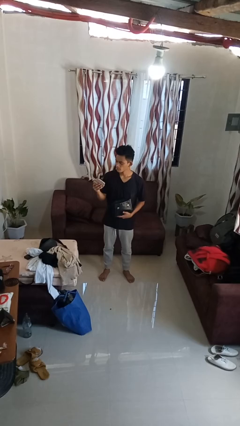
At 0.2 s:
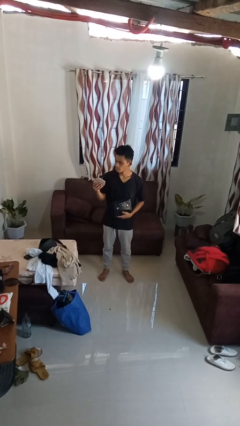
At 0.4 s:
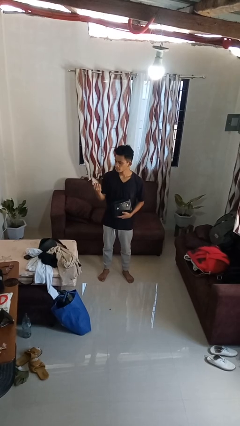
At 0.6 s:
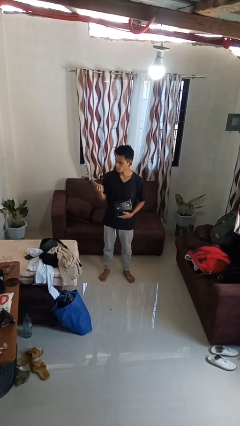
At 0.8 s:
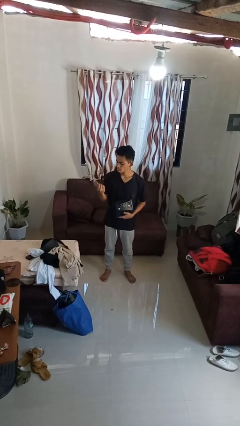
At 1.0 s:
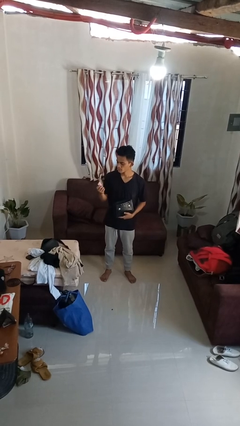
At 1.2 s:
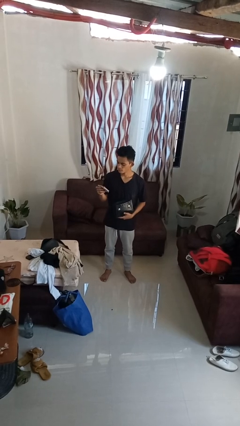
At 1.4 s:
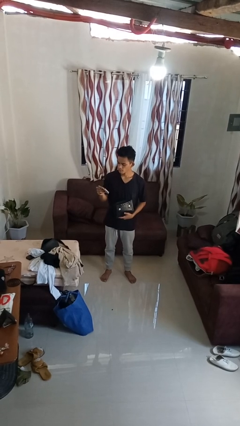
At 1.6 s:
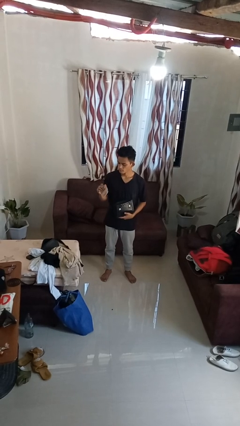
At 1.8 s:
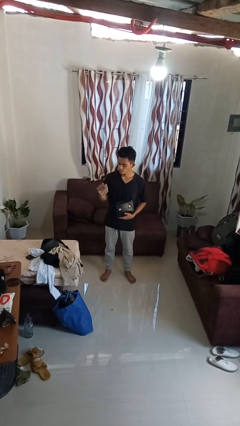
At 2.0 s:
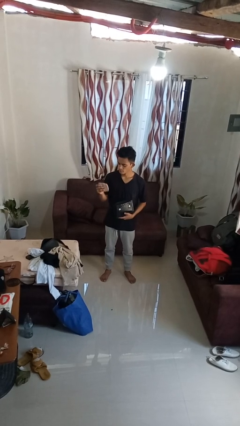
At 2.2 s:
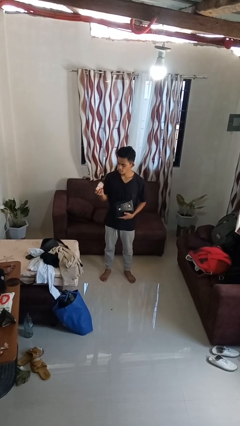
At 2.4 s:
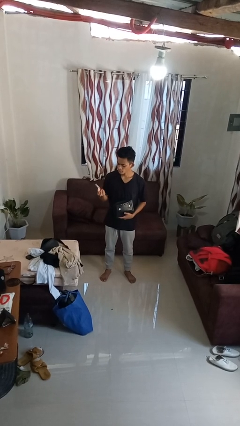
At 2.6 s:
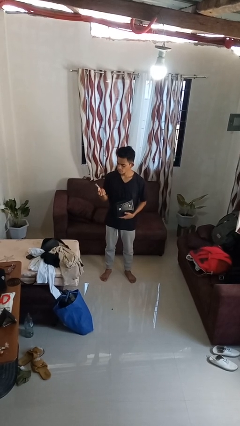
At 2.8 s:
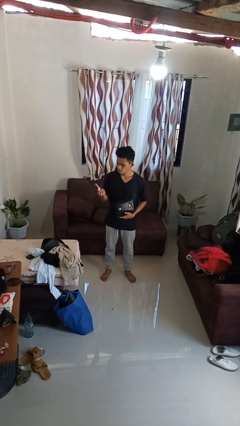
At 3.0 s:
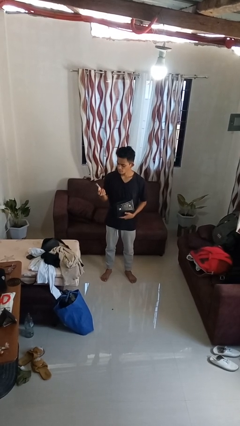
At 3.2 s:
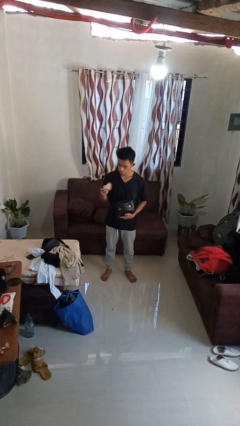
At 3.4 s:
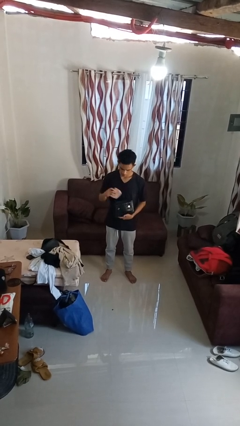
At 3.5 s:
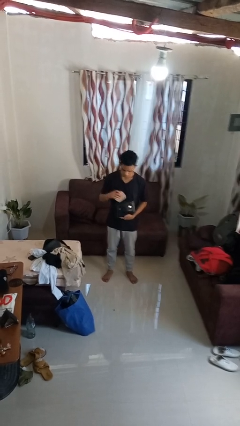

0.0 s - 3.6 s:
person takes object from purse

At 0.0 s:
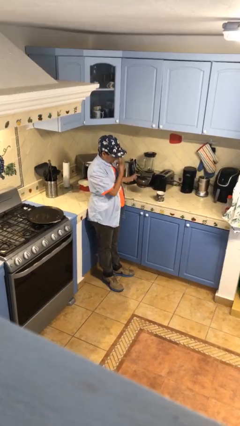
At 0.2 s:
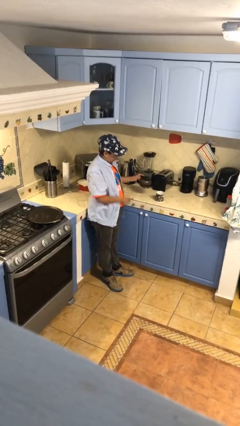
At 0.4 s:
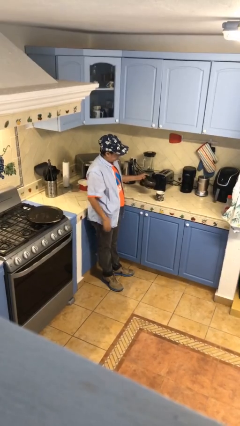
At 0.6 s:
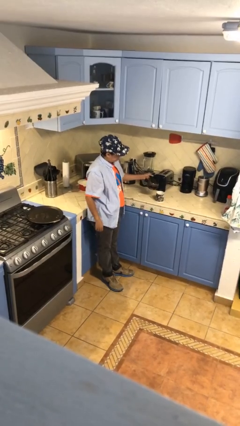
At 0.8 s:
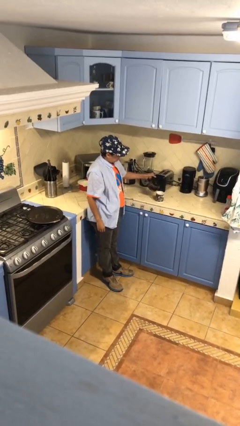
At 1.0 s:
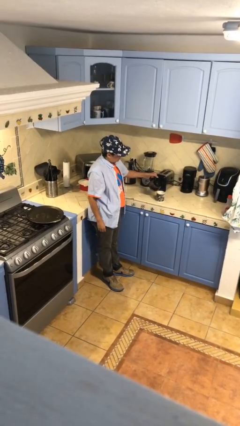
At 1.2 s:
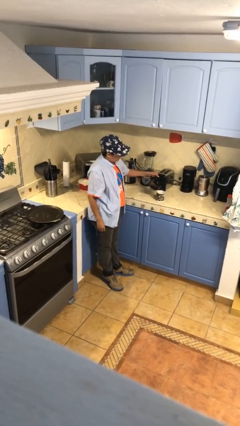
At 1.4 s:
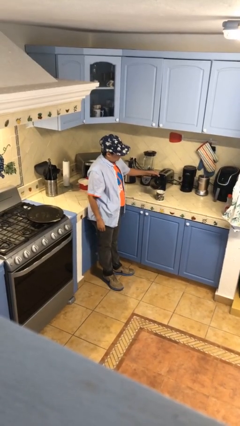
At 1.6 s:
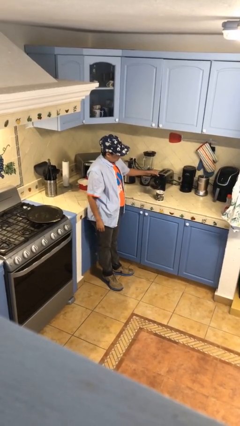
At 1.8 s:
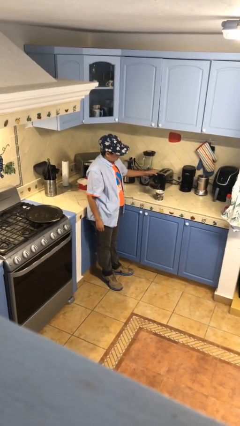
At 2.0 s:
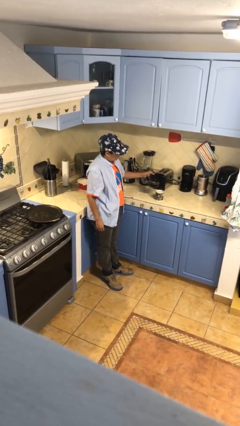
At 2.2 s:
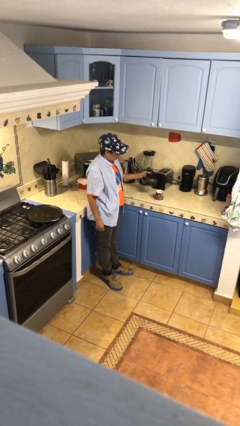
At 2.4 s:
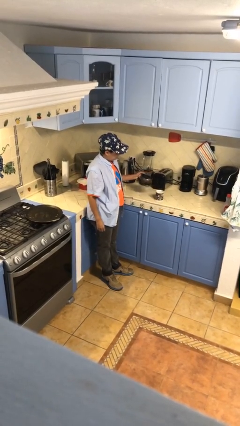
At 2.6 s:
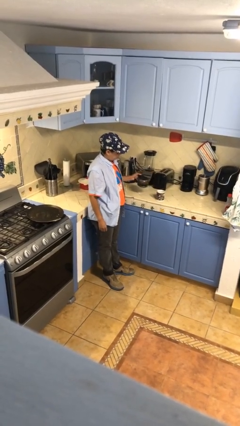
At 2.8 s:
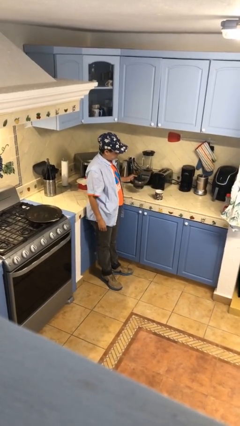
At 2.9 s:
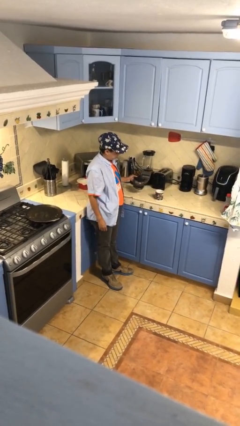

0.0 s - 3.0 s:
person pours coffee into mug

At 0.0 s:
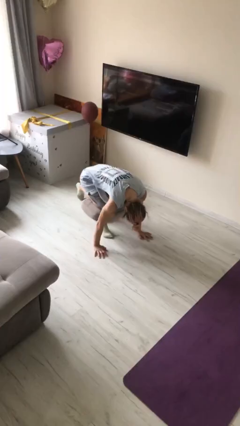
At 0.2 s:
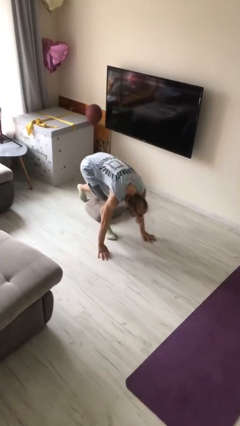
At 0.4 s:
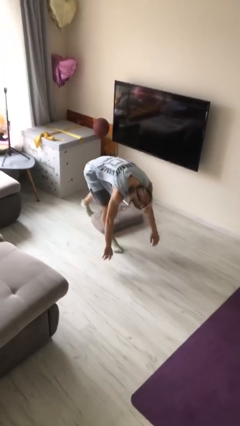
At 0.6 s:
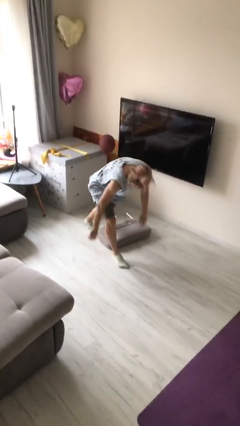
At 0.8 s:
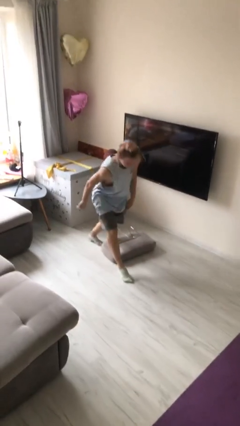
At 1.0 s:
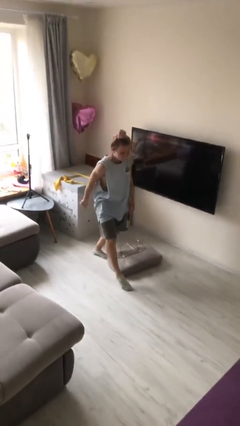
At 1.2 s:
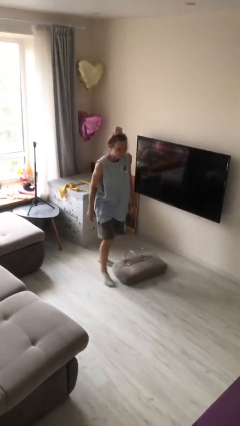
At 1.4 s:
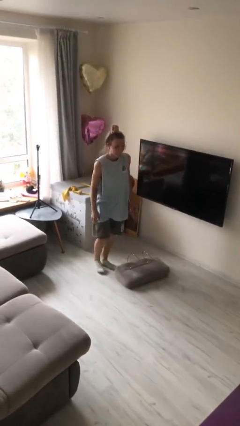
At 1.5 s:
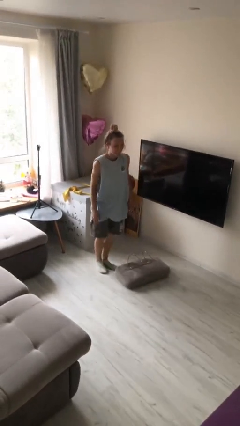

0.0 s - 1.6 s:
person stands up from floor

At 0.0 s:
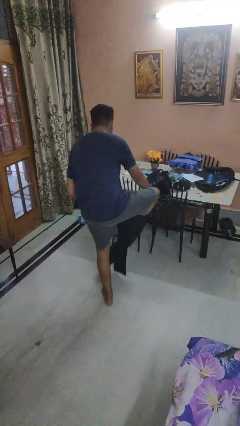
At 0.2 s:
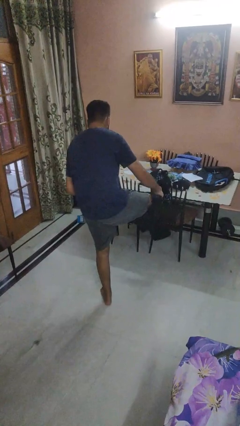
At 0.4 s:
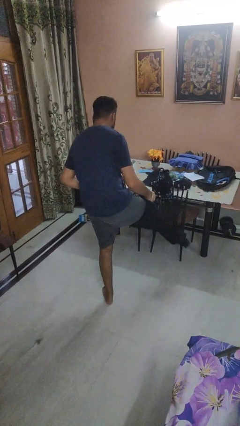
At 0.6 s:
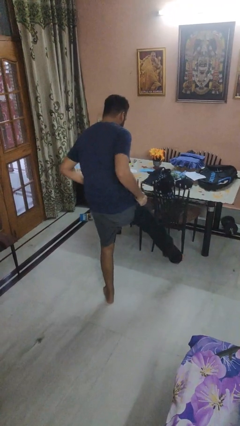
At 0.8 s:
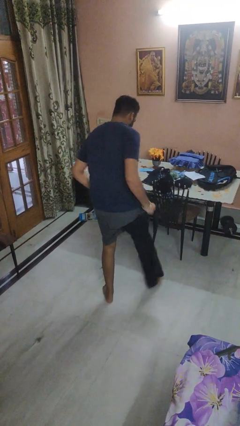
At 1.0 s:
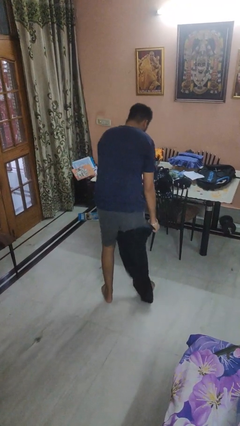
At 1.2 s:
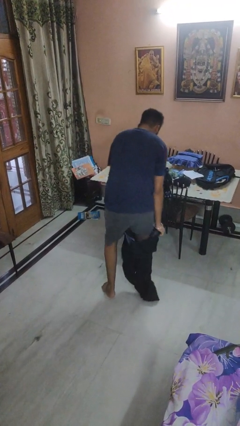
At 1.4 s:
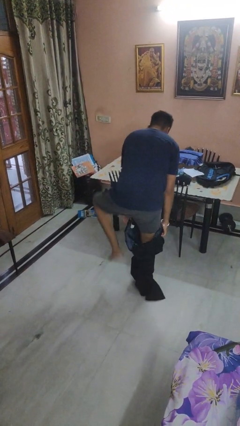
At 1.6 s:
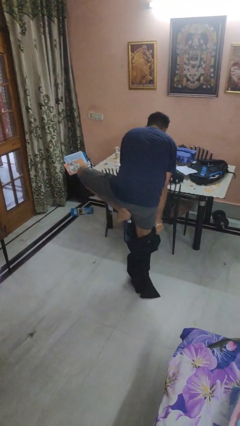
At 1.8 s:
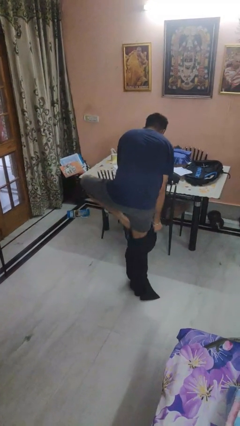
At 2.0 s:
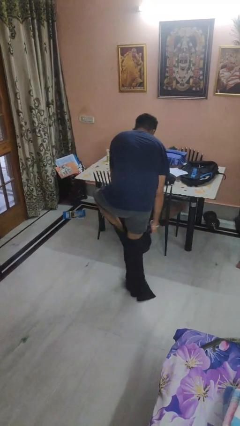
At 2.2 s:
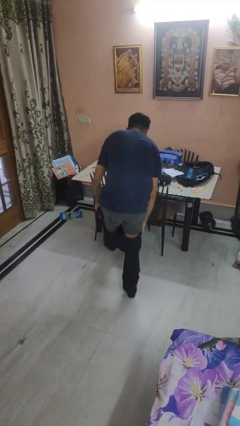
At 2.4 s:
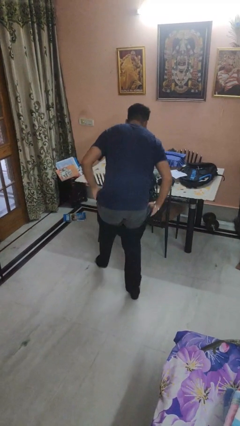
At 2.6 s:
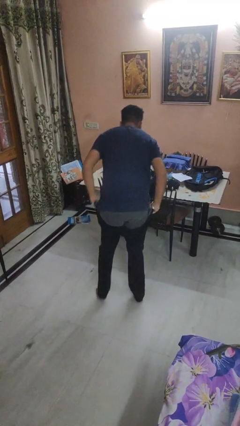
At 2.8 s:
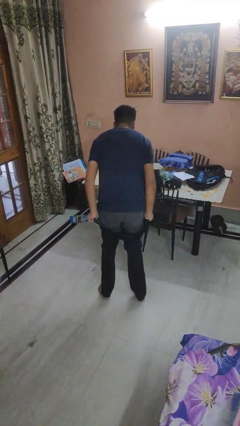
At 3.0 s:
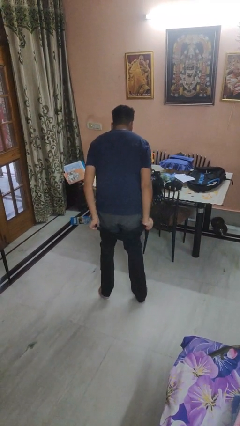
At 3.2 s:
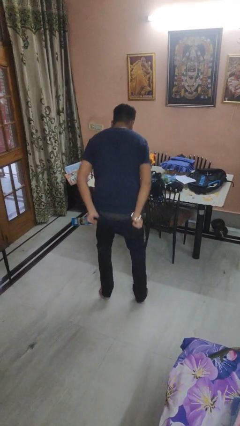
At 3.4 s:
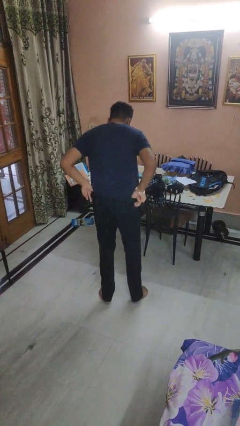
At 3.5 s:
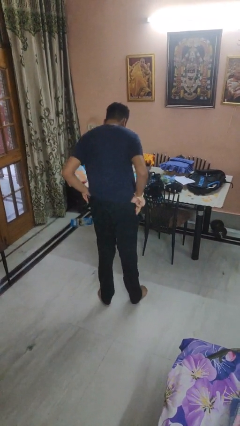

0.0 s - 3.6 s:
person puts on pants

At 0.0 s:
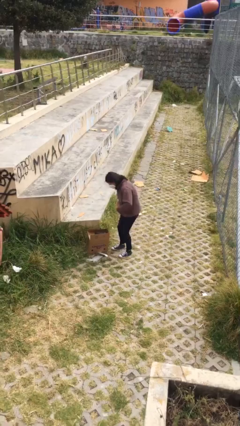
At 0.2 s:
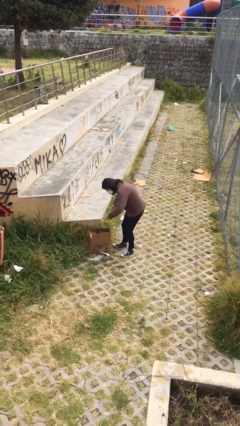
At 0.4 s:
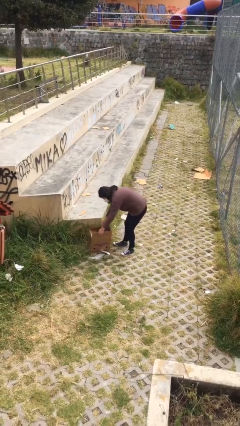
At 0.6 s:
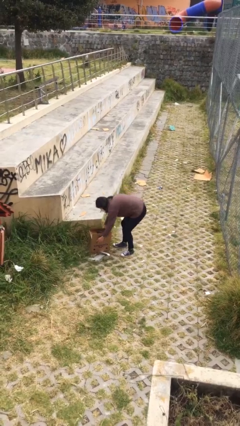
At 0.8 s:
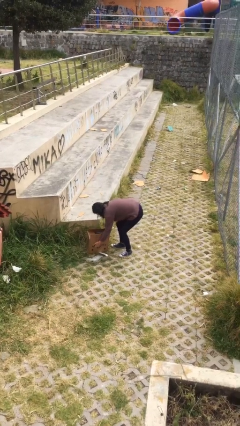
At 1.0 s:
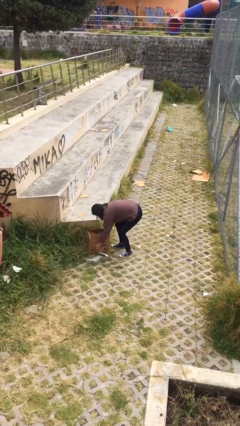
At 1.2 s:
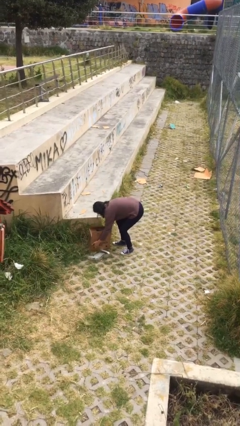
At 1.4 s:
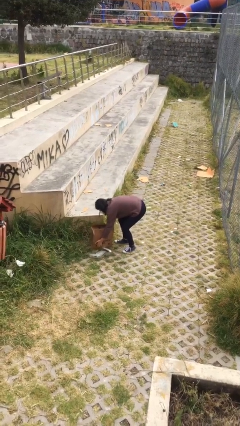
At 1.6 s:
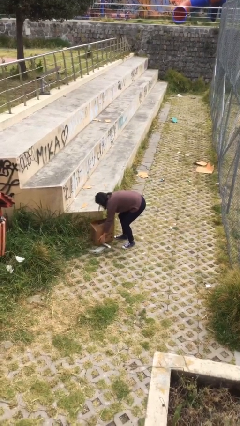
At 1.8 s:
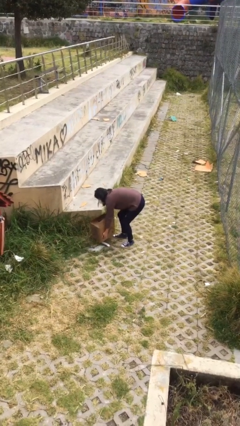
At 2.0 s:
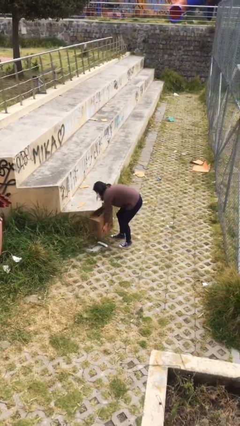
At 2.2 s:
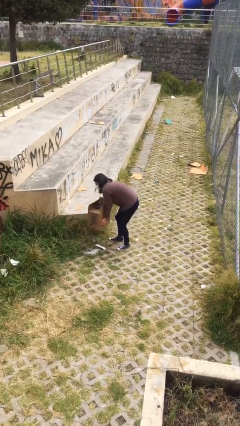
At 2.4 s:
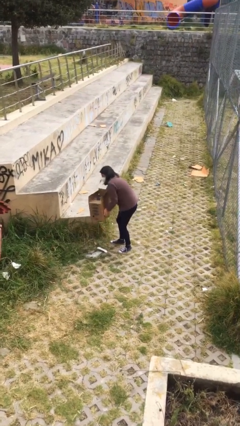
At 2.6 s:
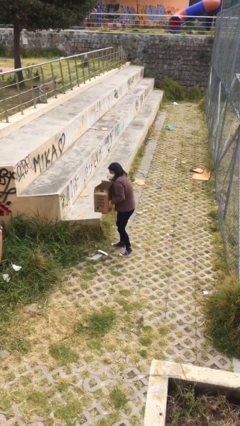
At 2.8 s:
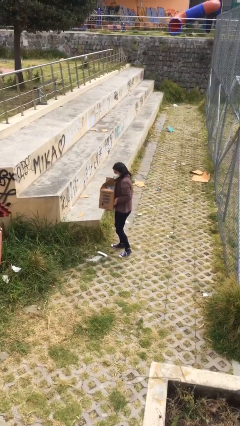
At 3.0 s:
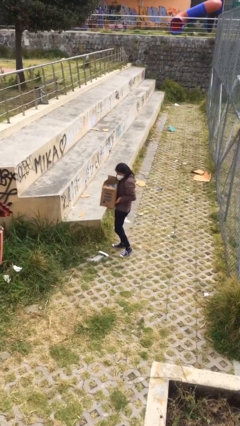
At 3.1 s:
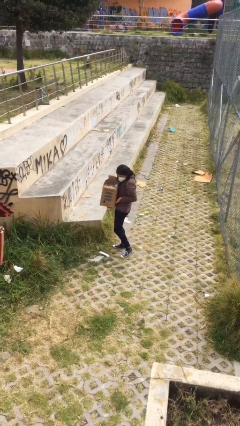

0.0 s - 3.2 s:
person picks up object from floor

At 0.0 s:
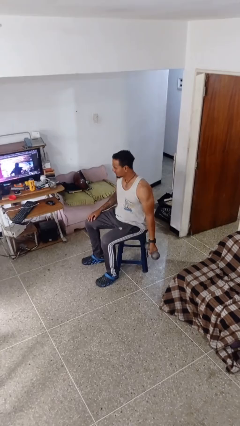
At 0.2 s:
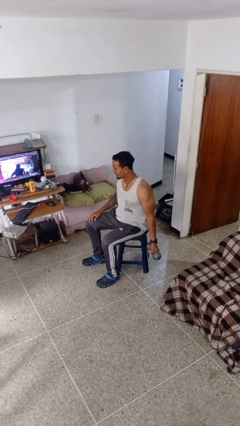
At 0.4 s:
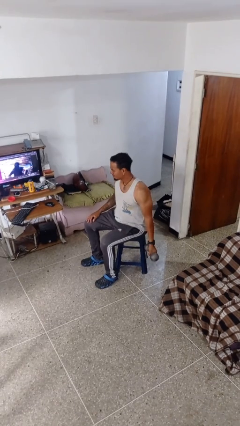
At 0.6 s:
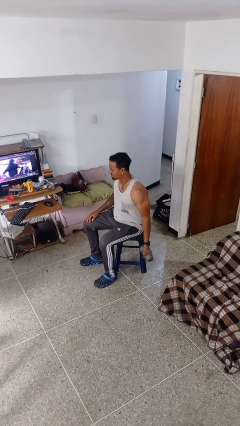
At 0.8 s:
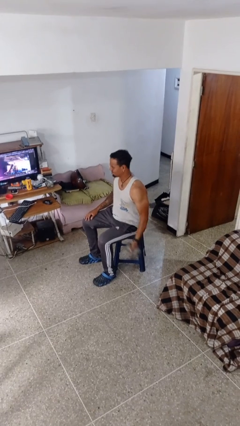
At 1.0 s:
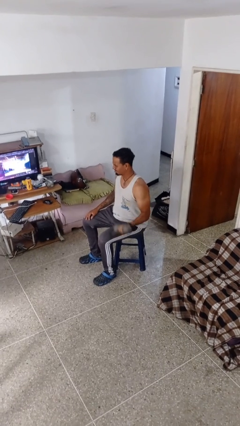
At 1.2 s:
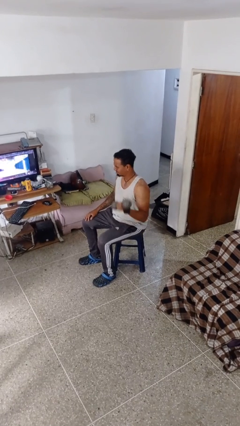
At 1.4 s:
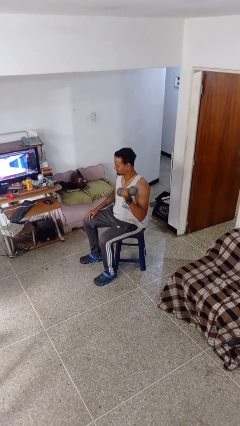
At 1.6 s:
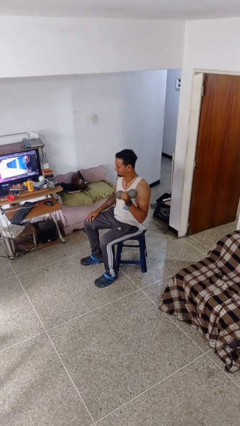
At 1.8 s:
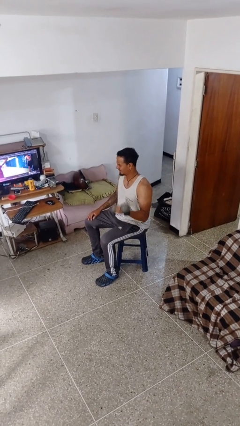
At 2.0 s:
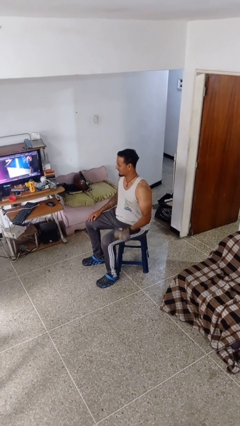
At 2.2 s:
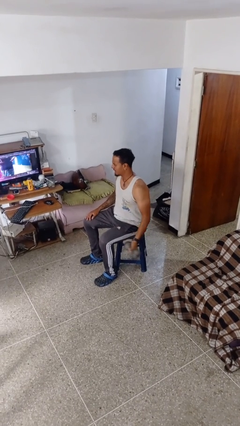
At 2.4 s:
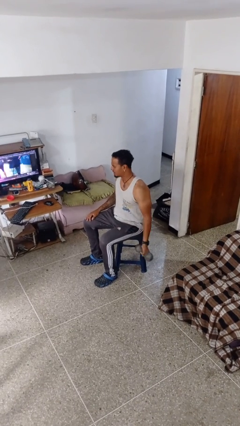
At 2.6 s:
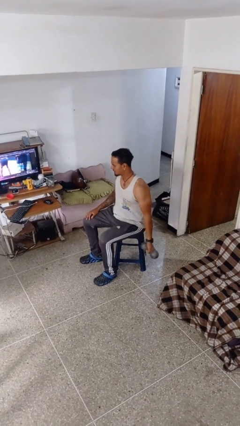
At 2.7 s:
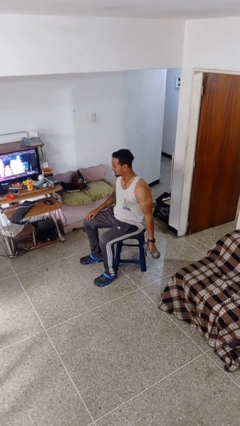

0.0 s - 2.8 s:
person lifts dumbbells
